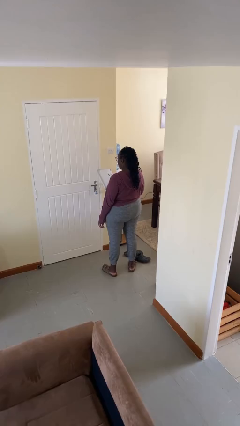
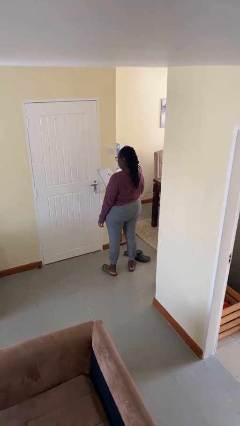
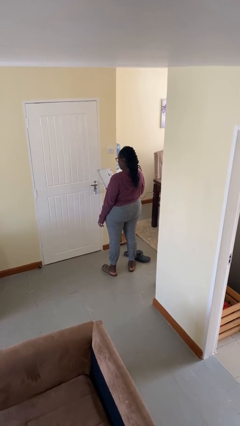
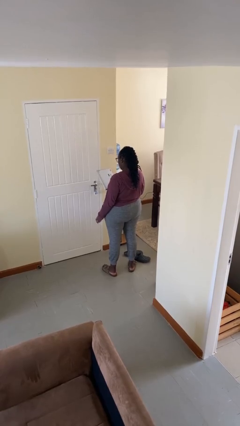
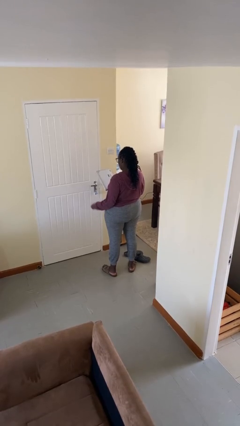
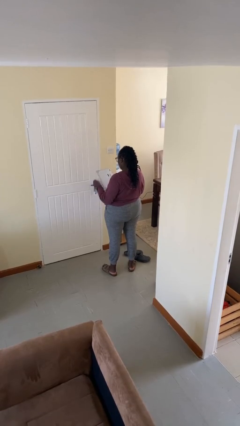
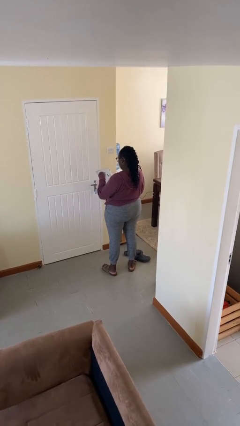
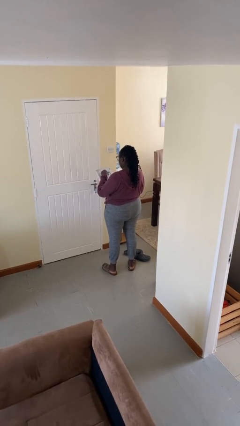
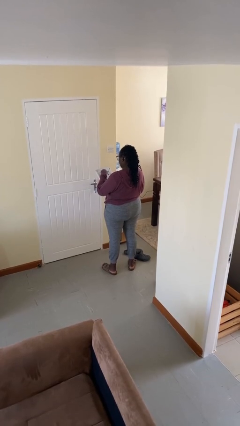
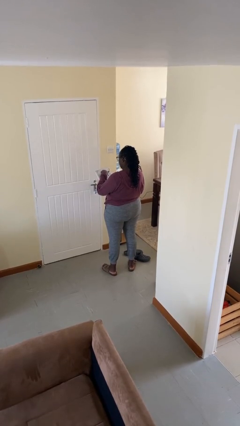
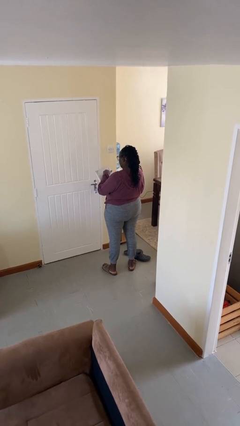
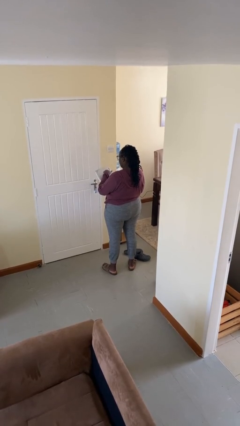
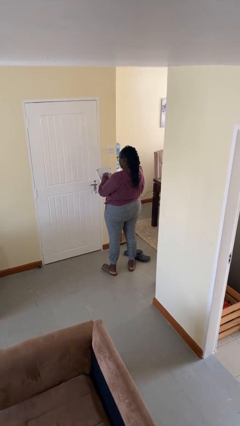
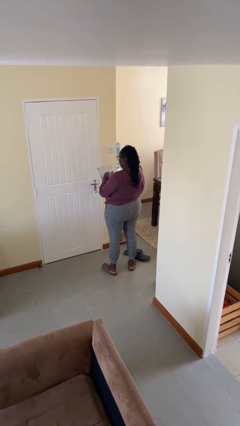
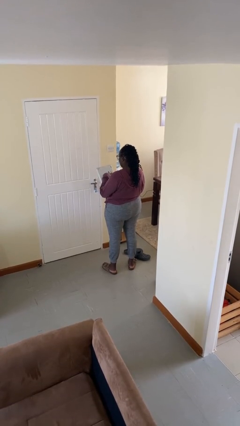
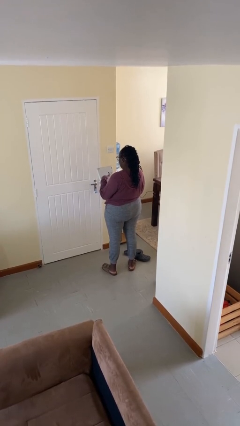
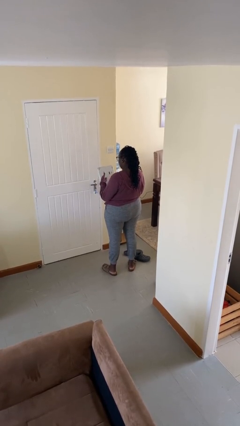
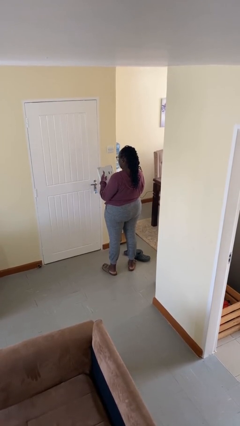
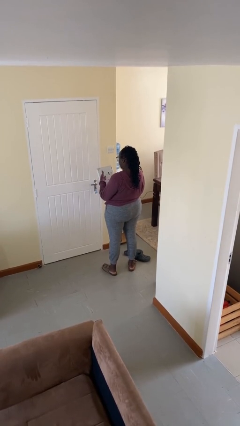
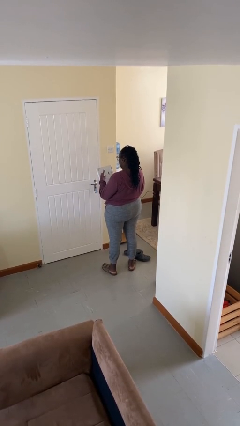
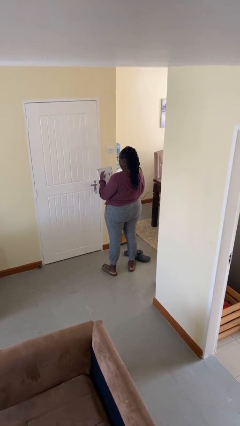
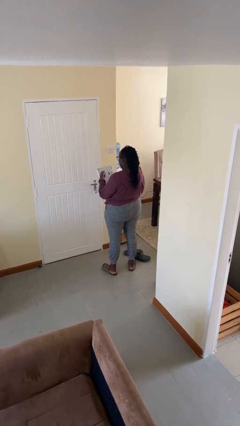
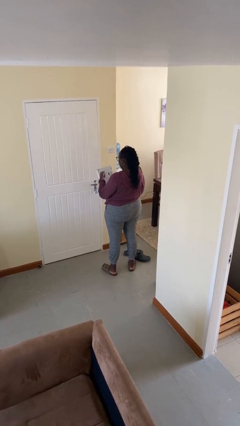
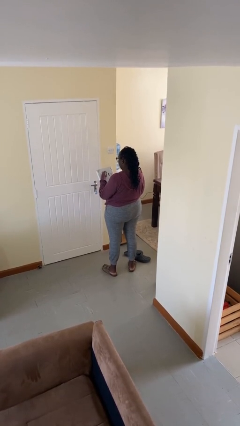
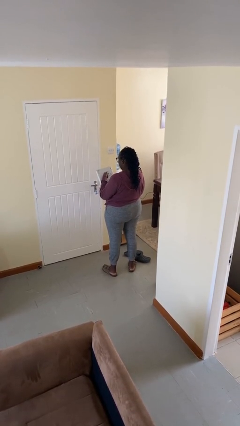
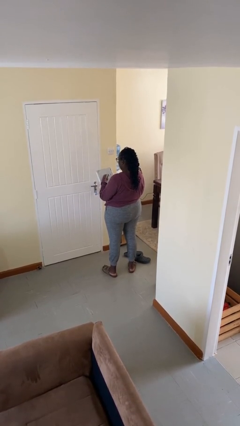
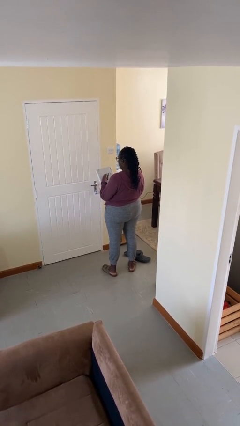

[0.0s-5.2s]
person taps object with finger

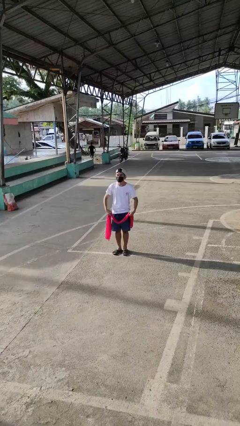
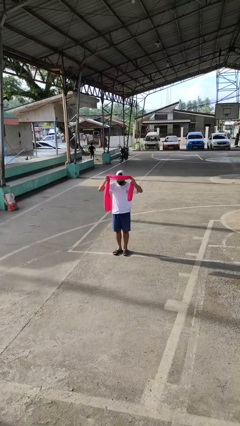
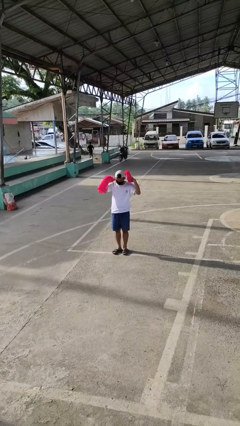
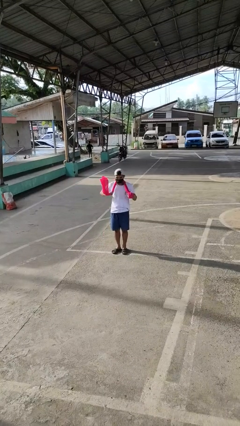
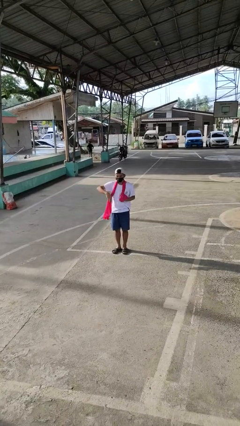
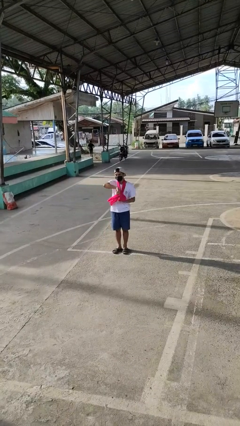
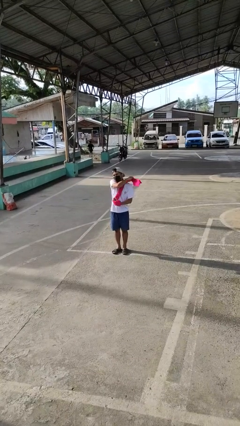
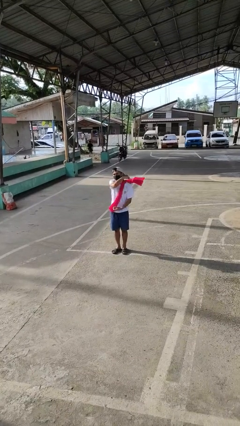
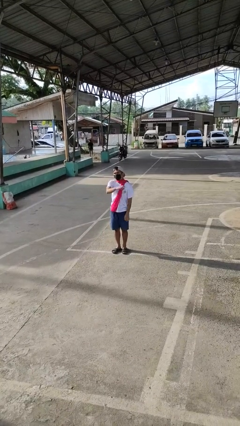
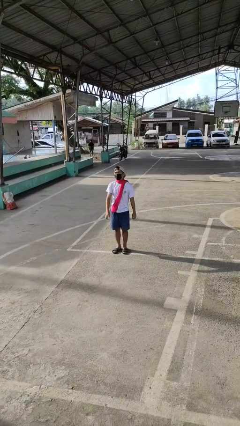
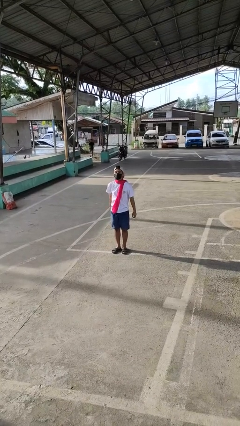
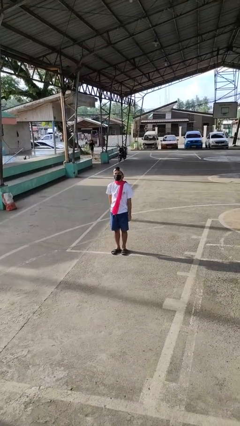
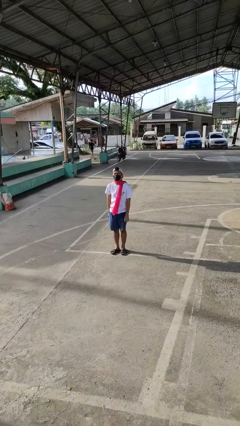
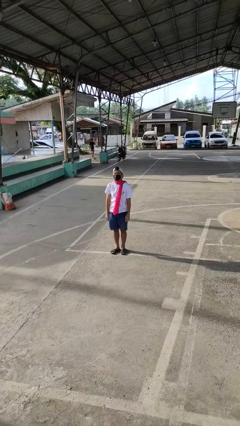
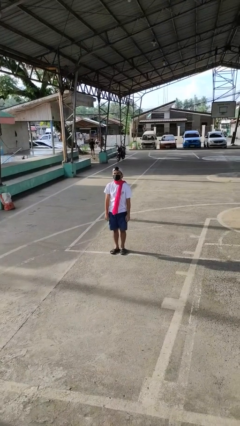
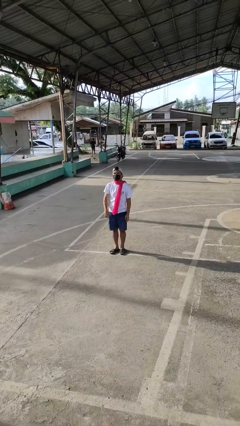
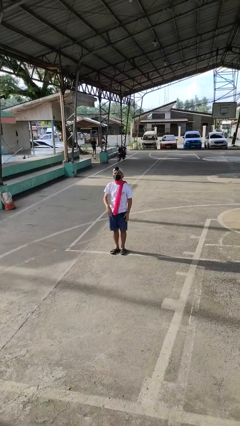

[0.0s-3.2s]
person puts on scarf

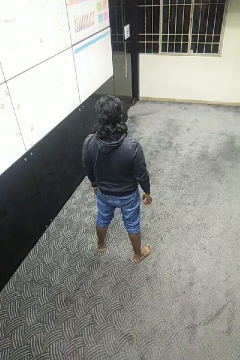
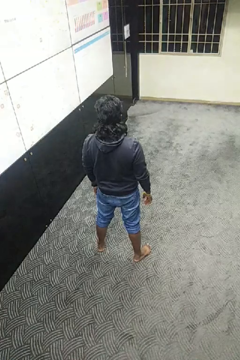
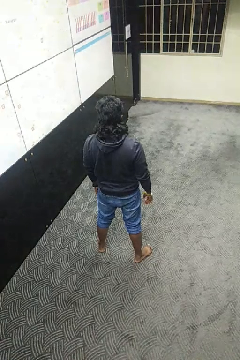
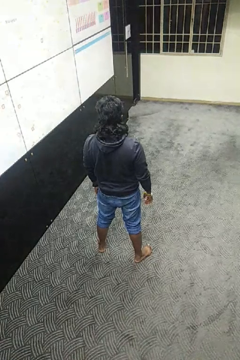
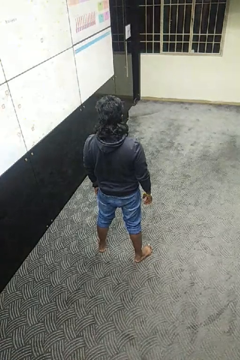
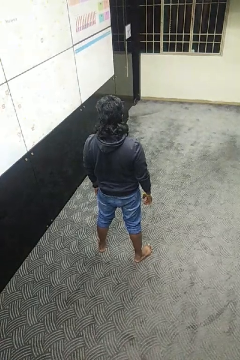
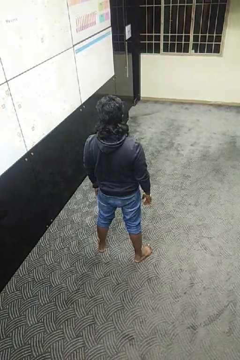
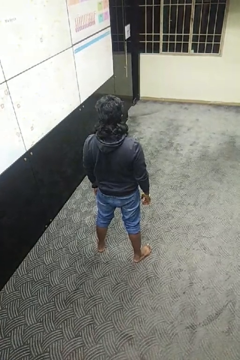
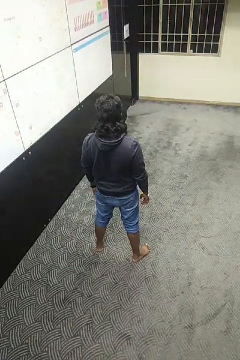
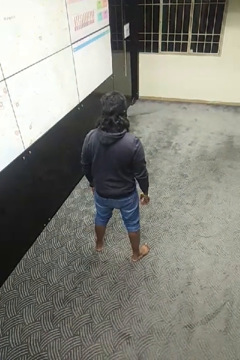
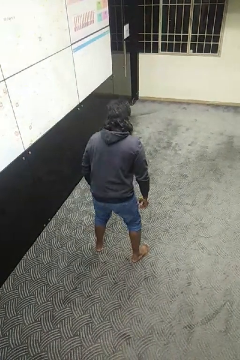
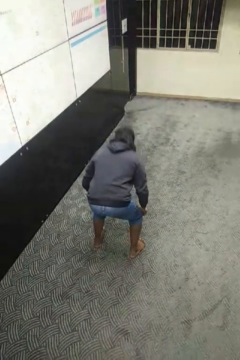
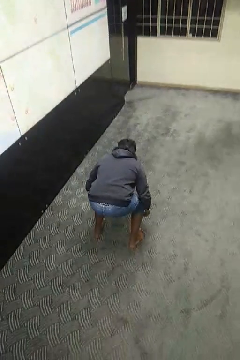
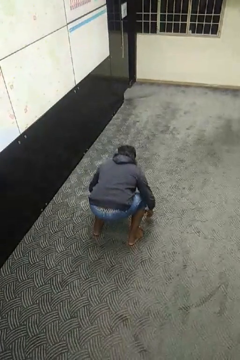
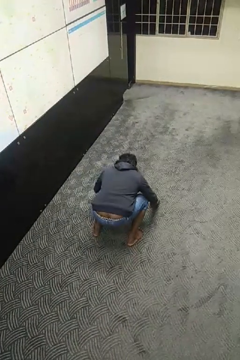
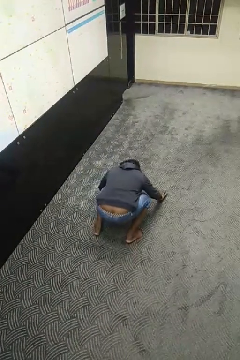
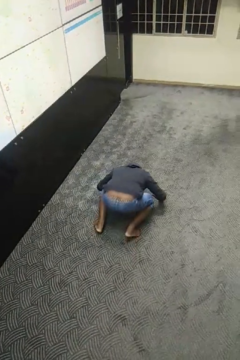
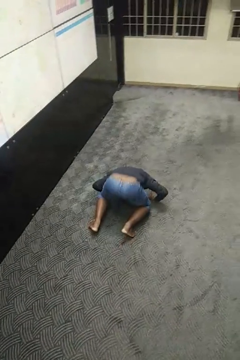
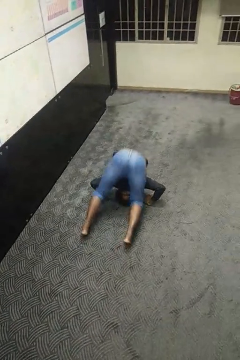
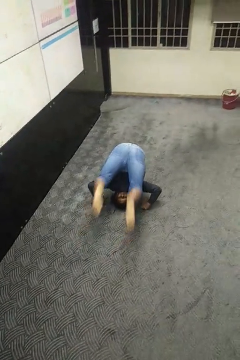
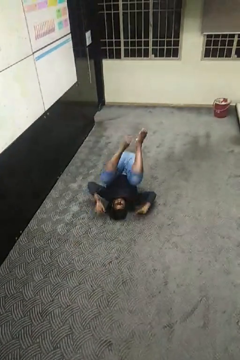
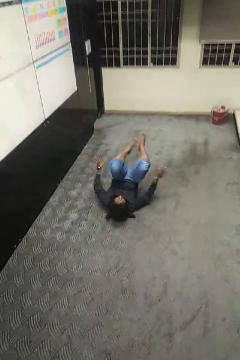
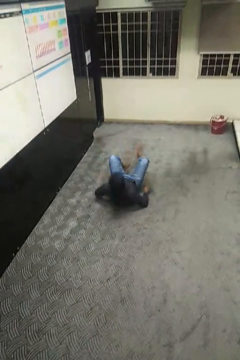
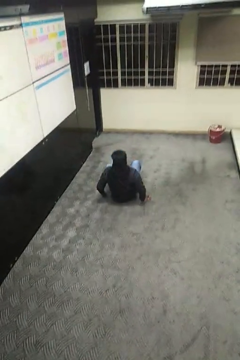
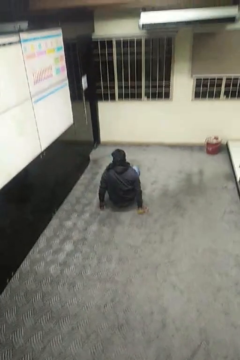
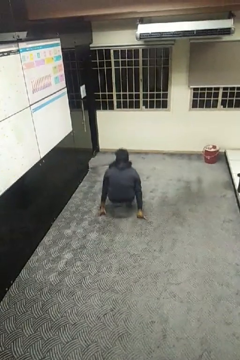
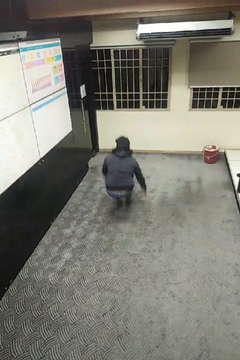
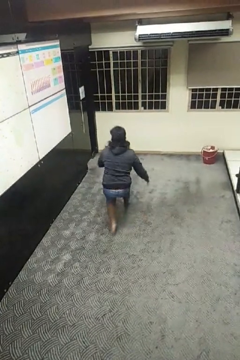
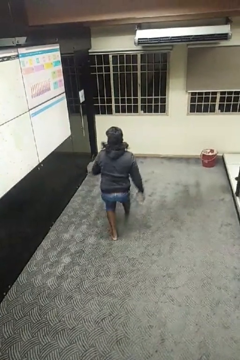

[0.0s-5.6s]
person somersaults

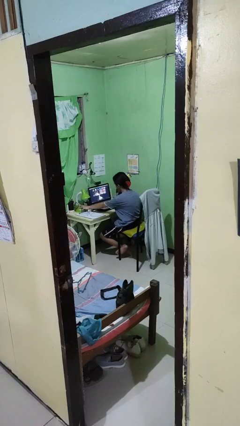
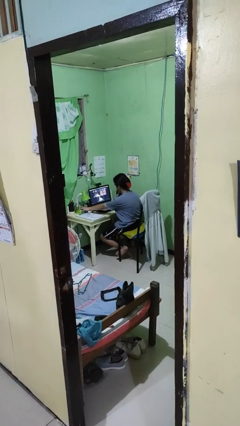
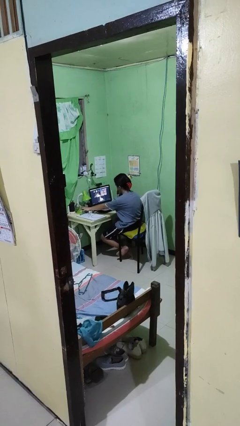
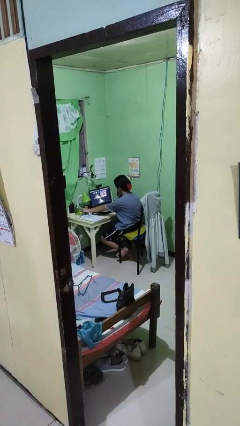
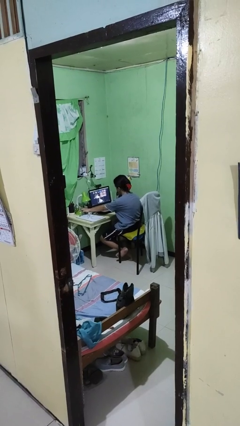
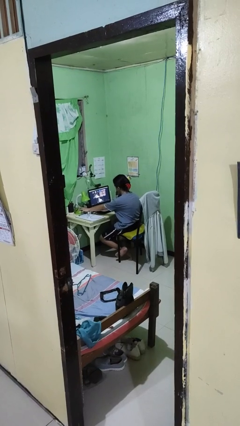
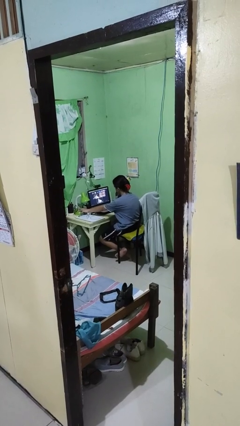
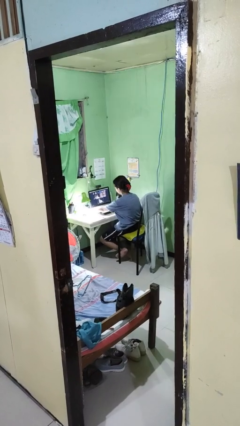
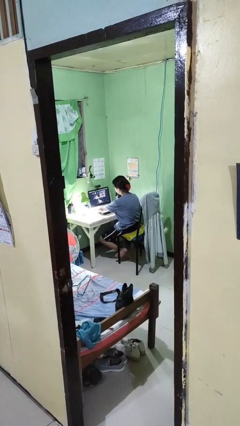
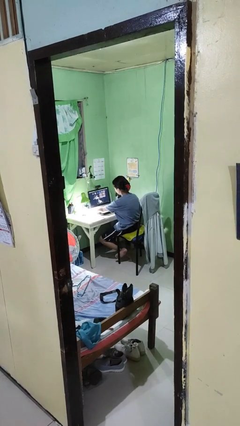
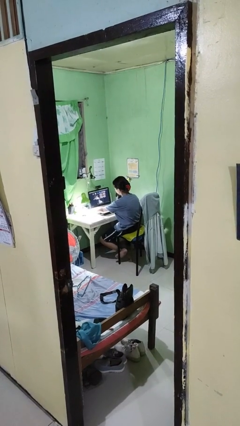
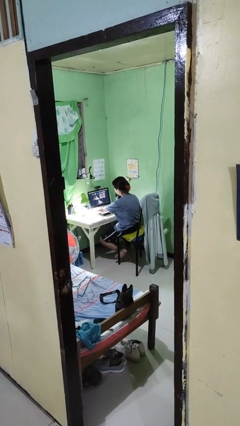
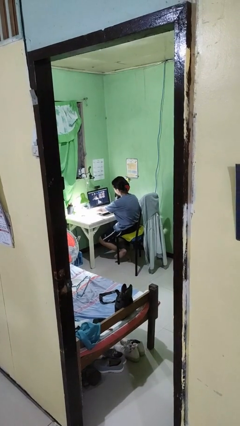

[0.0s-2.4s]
person turns on lamp

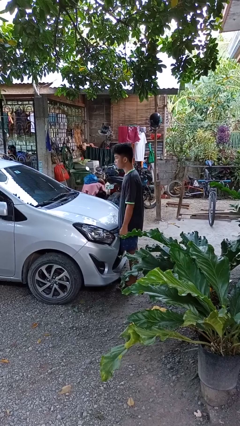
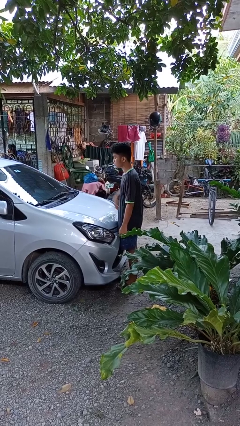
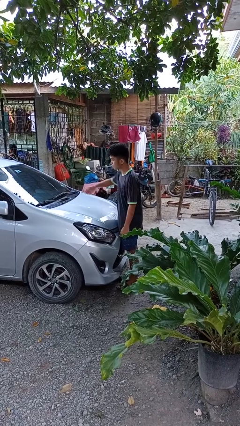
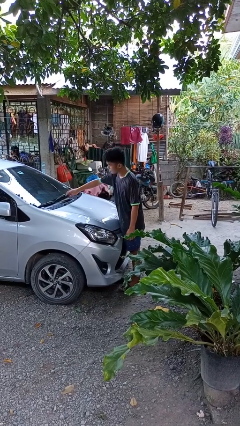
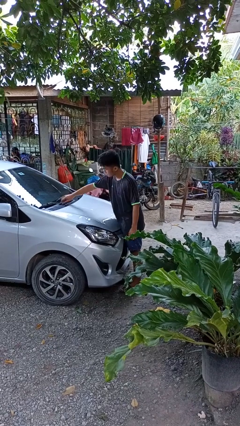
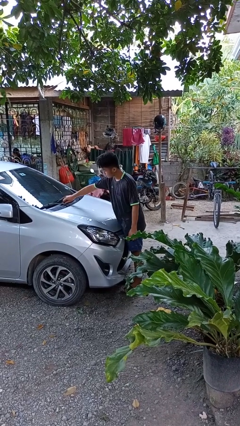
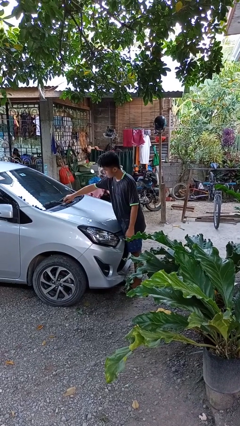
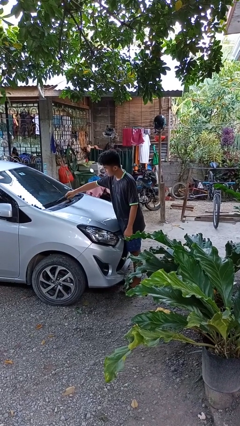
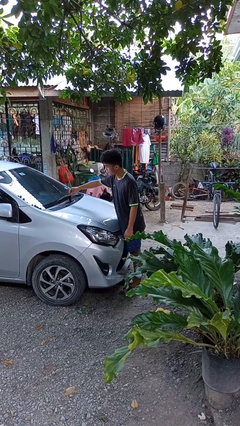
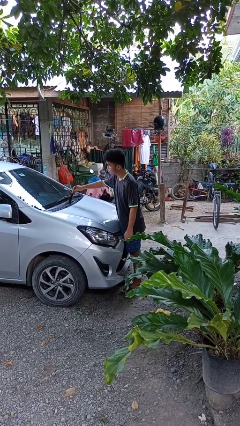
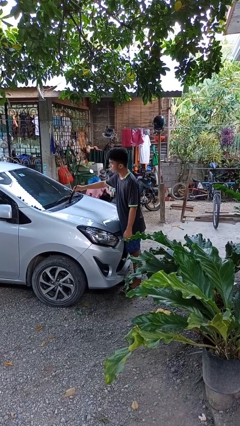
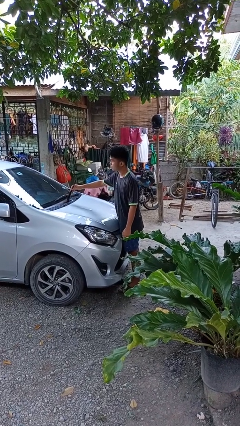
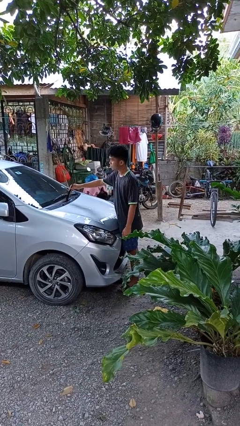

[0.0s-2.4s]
person flips up car wipers
